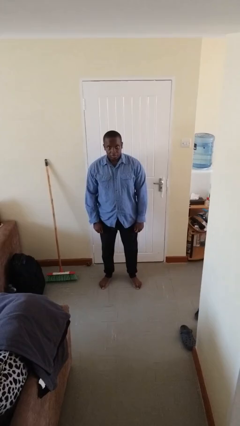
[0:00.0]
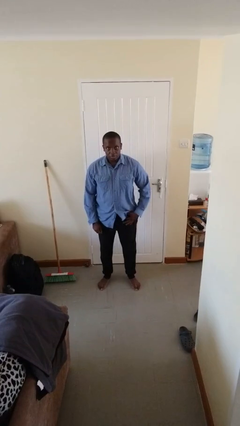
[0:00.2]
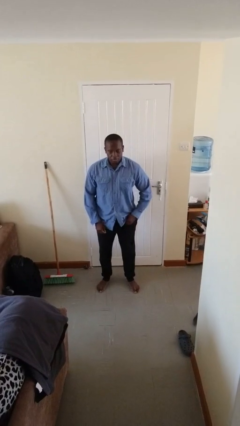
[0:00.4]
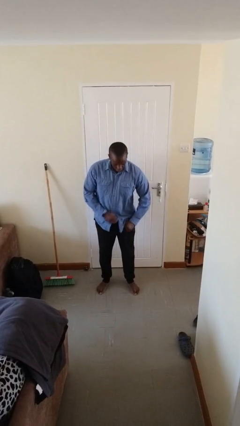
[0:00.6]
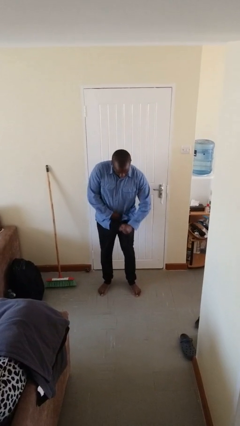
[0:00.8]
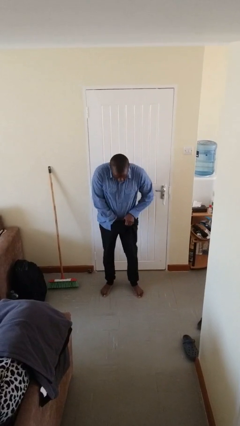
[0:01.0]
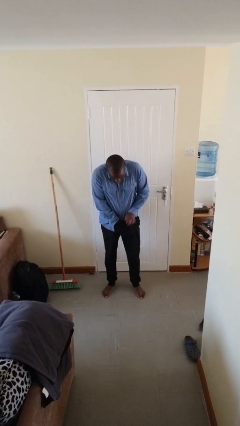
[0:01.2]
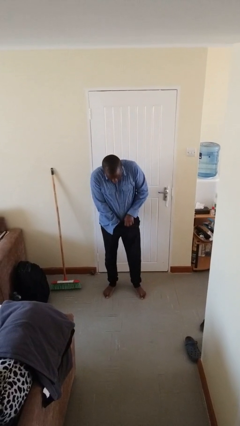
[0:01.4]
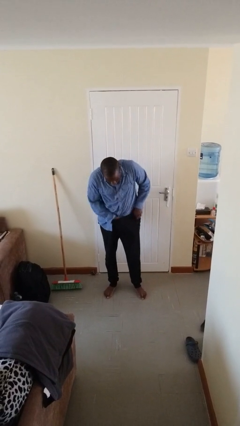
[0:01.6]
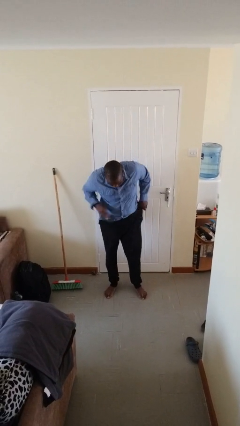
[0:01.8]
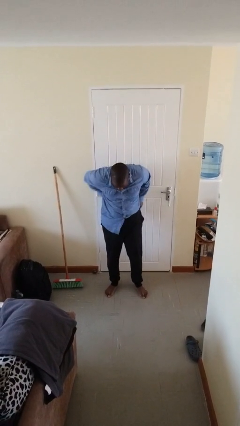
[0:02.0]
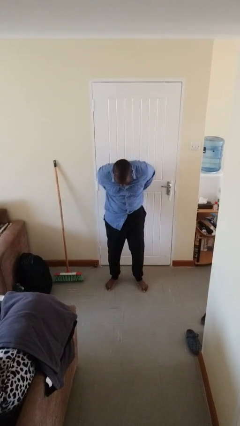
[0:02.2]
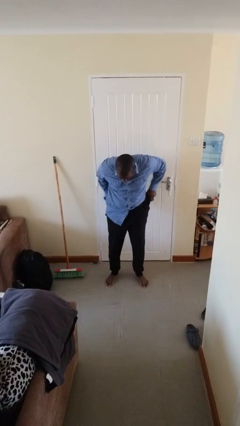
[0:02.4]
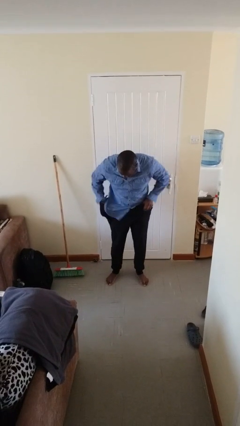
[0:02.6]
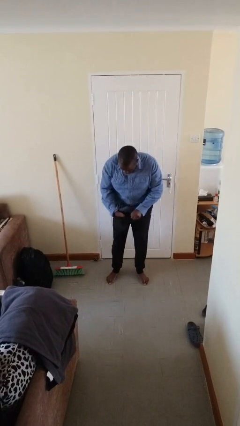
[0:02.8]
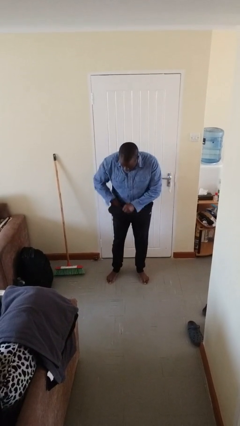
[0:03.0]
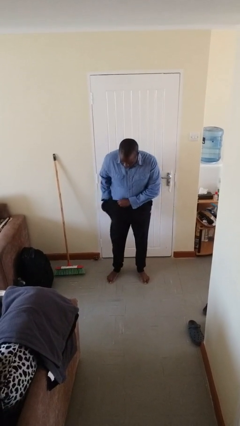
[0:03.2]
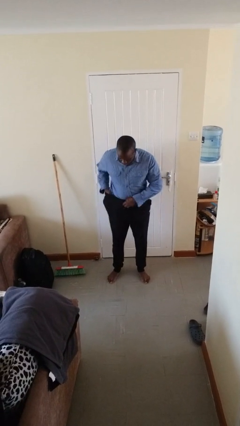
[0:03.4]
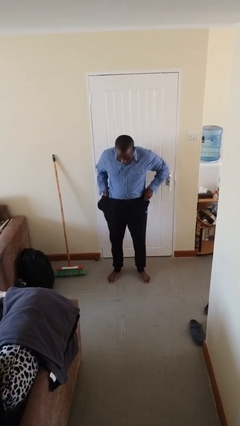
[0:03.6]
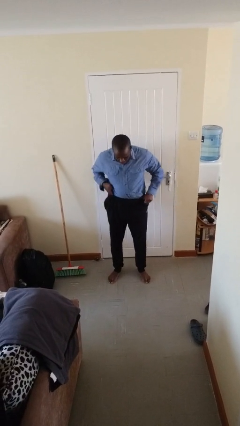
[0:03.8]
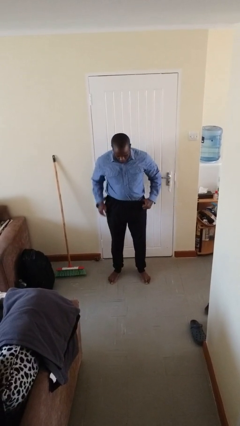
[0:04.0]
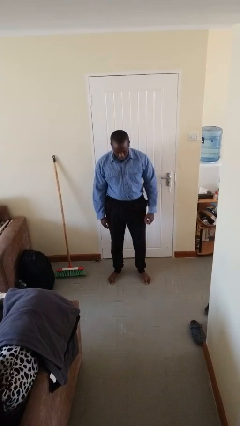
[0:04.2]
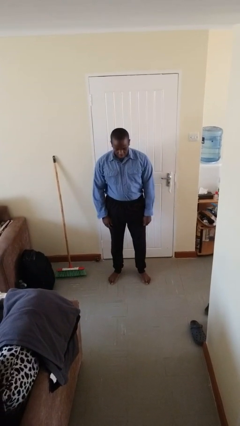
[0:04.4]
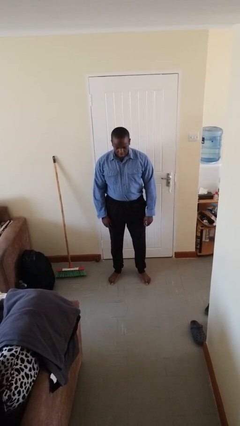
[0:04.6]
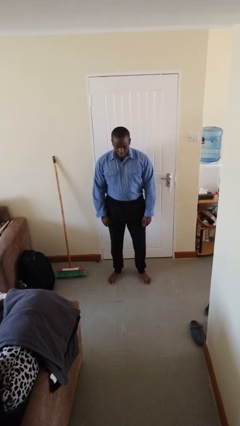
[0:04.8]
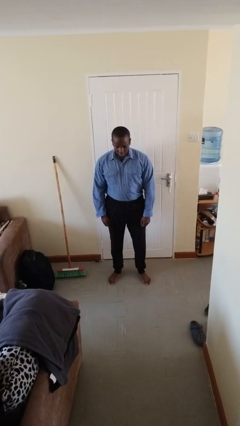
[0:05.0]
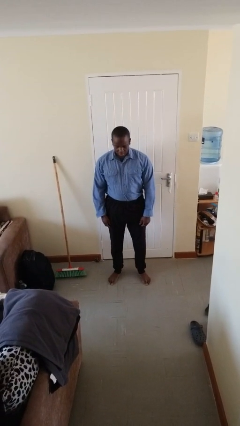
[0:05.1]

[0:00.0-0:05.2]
person tucks in shirt

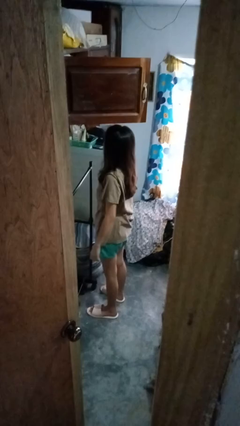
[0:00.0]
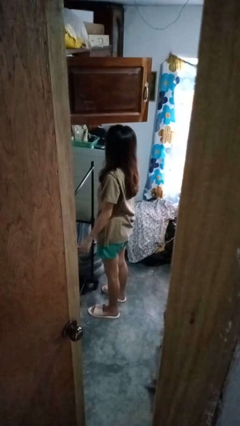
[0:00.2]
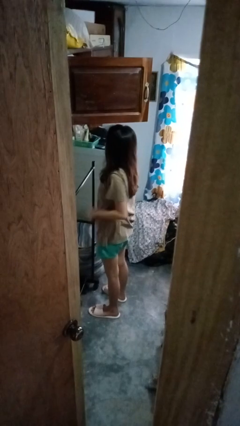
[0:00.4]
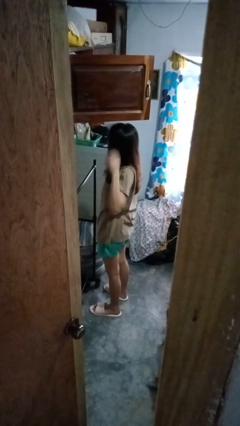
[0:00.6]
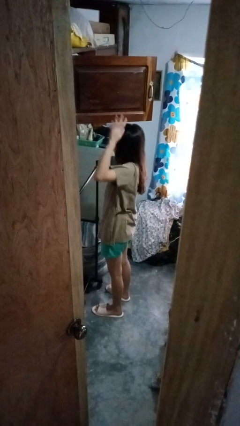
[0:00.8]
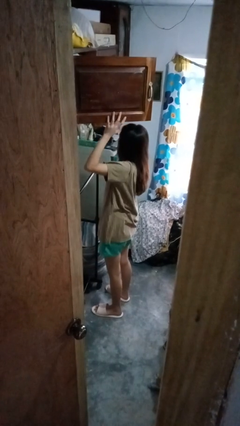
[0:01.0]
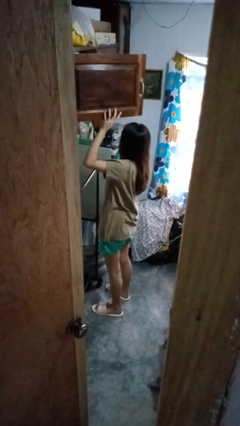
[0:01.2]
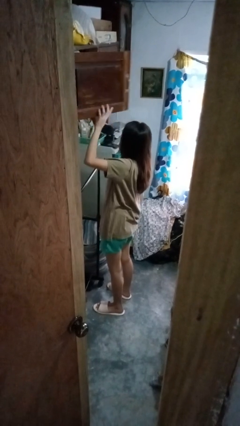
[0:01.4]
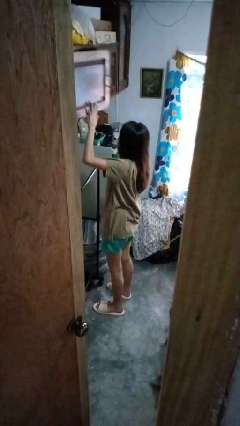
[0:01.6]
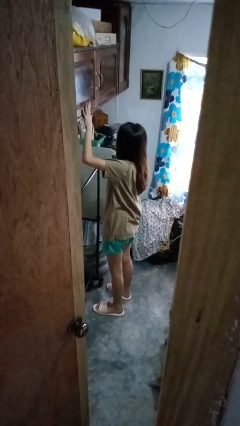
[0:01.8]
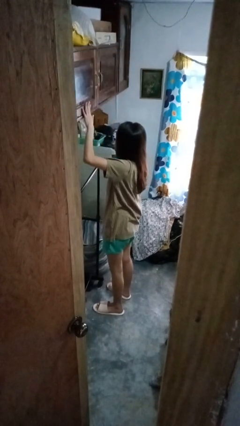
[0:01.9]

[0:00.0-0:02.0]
person closes closet door

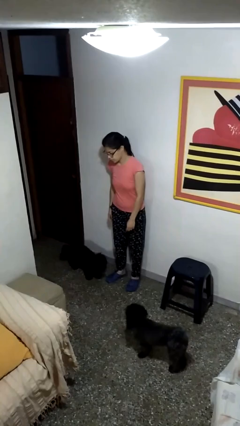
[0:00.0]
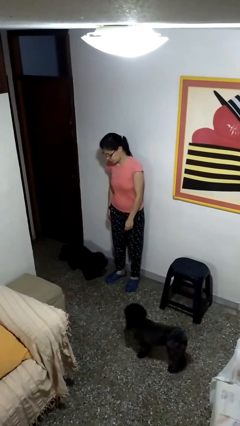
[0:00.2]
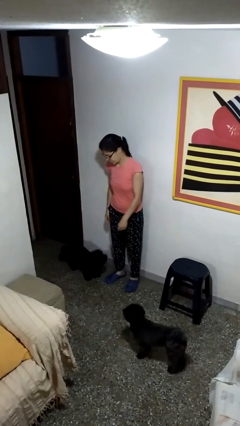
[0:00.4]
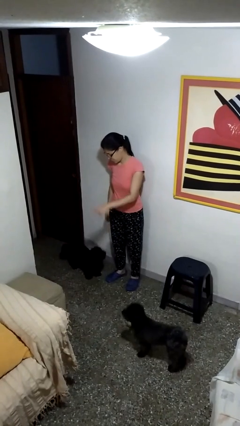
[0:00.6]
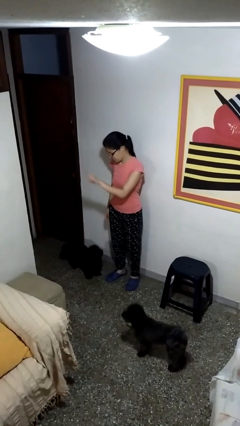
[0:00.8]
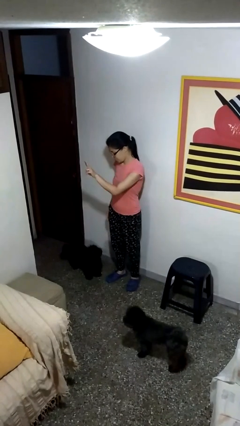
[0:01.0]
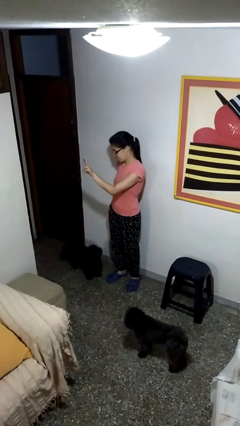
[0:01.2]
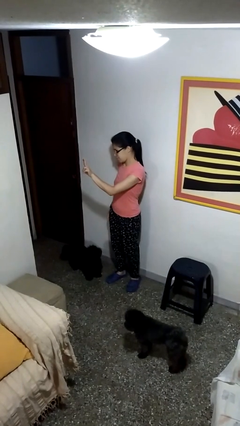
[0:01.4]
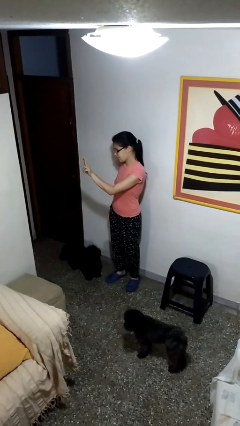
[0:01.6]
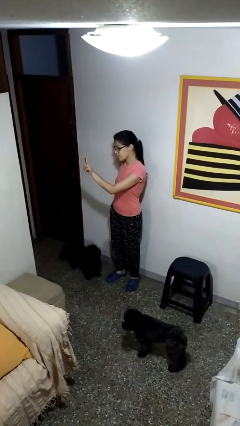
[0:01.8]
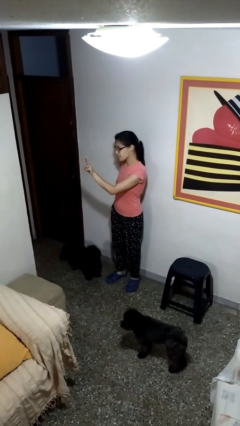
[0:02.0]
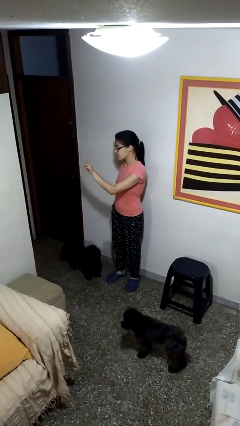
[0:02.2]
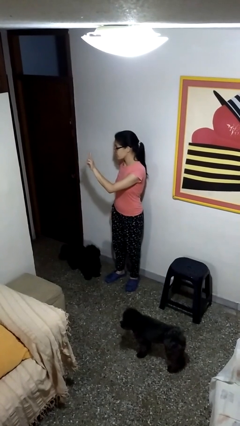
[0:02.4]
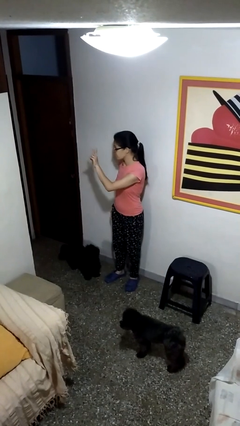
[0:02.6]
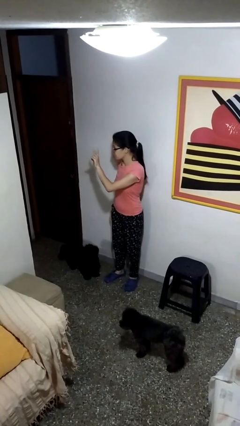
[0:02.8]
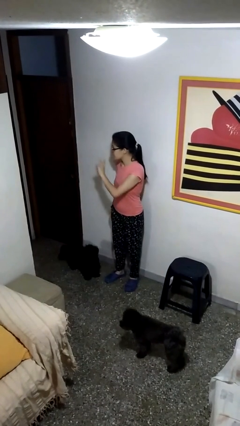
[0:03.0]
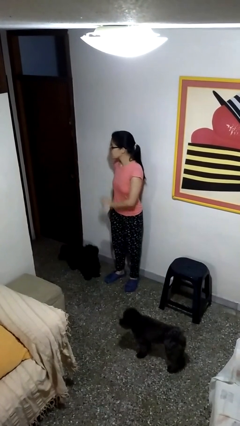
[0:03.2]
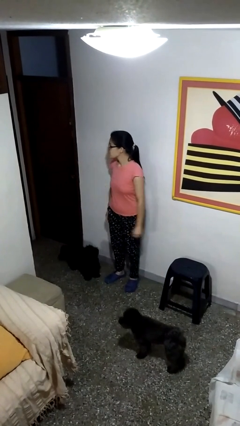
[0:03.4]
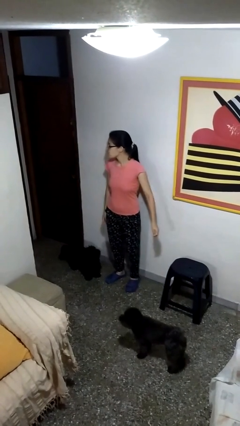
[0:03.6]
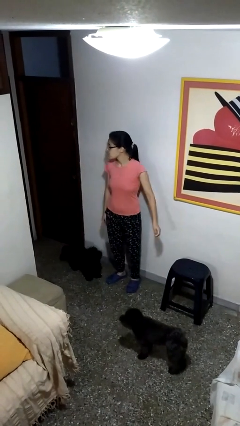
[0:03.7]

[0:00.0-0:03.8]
person gestures peace

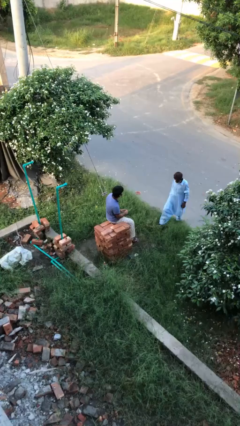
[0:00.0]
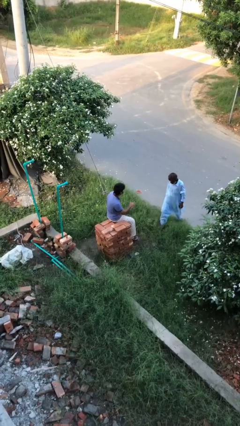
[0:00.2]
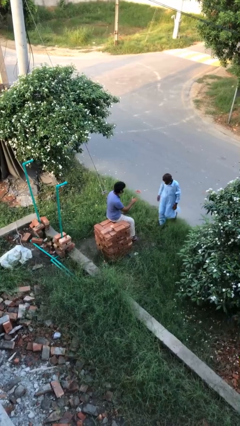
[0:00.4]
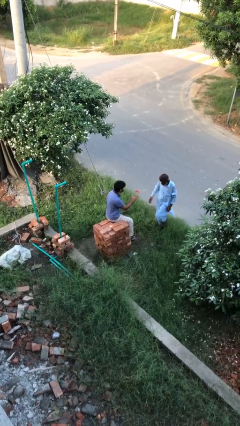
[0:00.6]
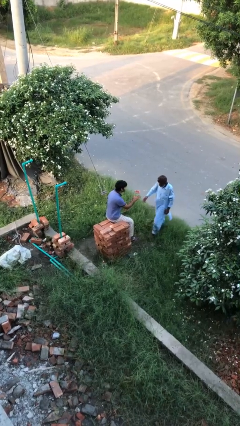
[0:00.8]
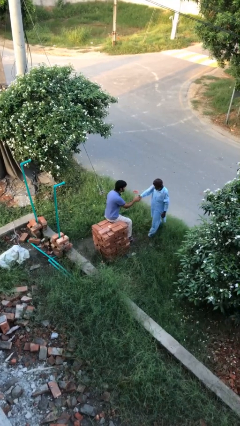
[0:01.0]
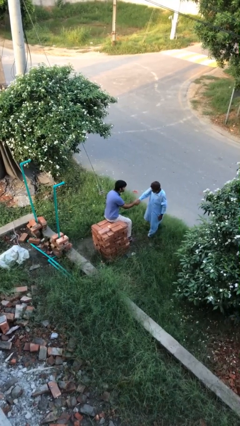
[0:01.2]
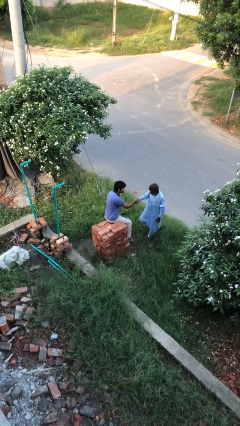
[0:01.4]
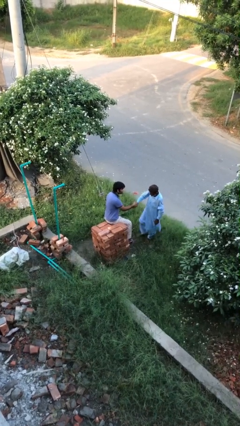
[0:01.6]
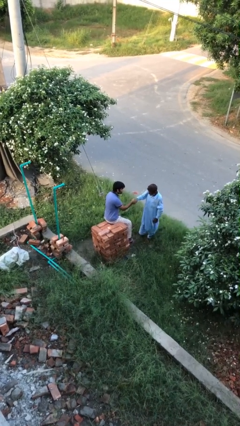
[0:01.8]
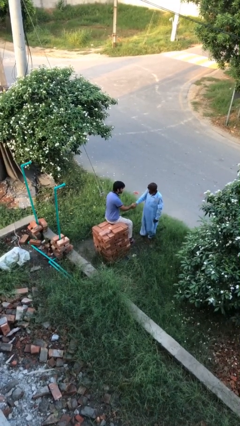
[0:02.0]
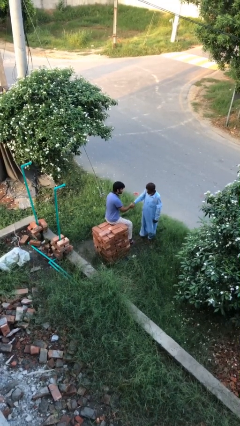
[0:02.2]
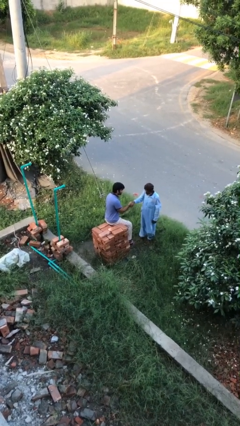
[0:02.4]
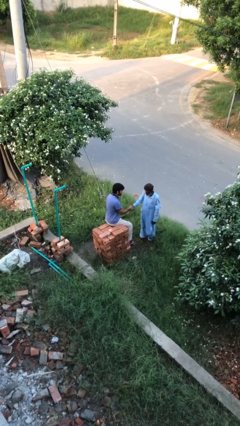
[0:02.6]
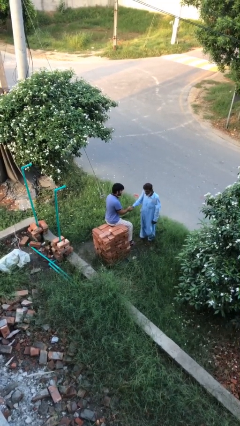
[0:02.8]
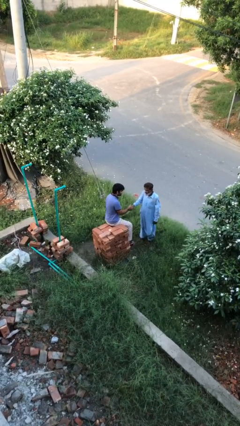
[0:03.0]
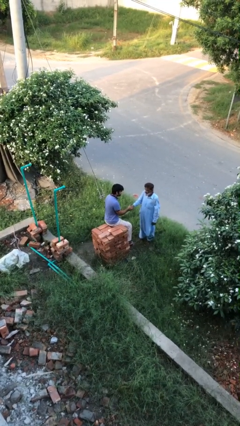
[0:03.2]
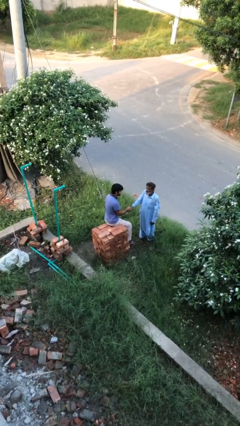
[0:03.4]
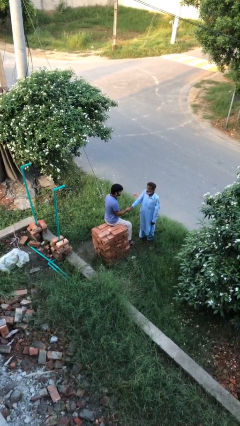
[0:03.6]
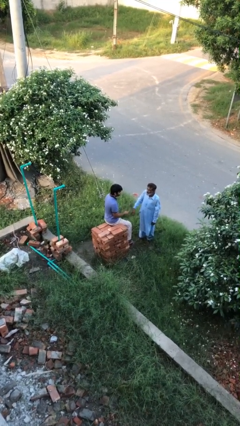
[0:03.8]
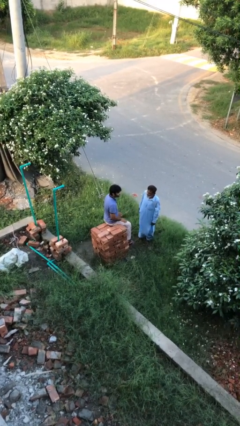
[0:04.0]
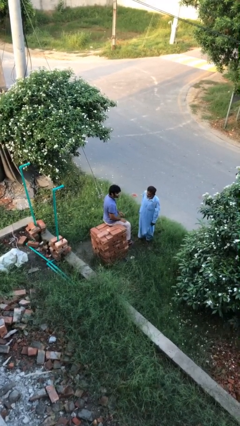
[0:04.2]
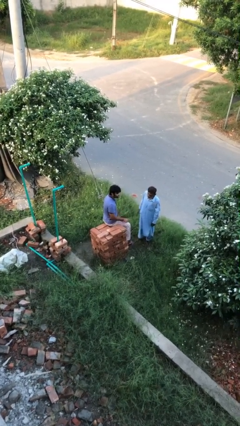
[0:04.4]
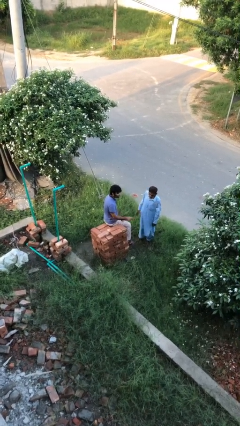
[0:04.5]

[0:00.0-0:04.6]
person shakes hand

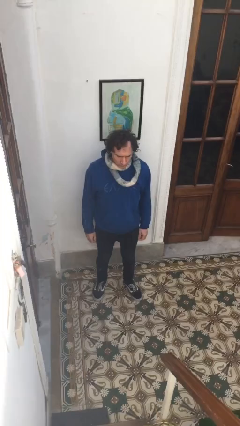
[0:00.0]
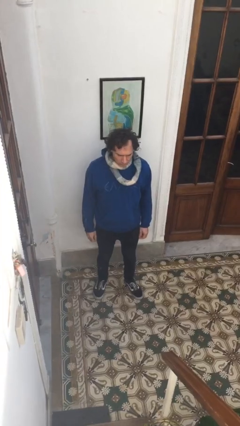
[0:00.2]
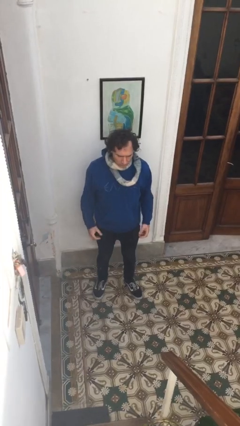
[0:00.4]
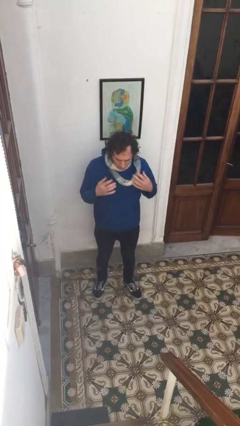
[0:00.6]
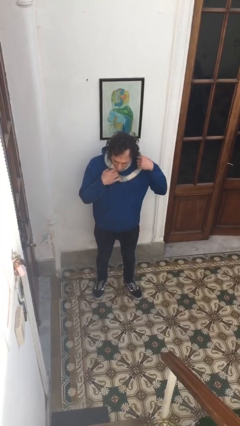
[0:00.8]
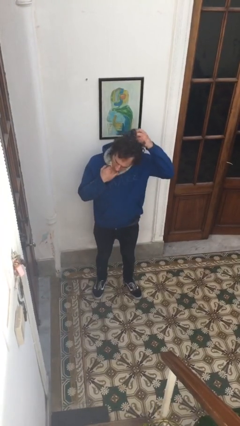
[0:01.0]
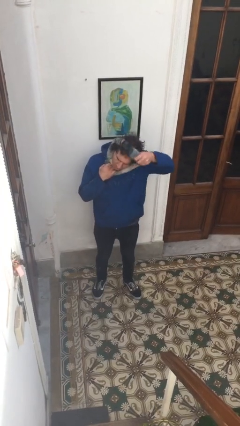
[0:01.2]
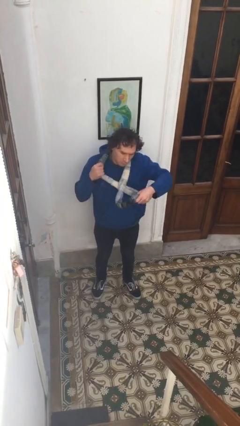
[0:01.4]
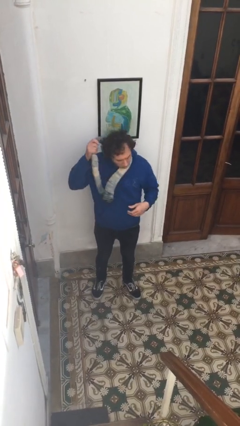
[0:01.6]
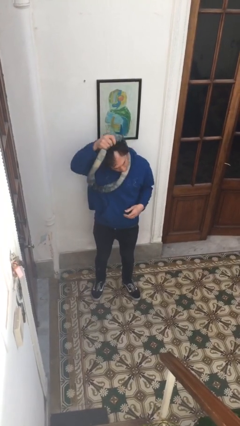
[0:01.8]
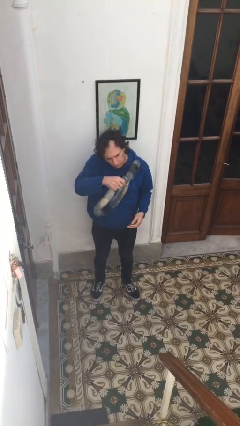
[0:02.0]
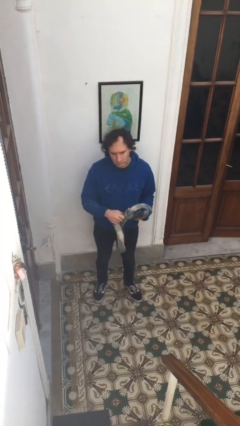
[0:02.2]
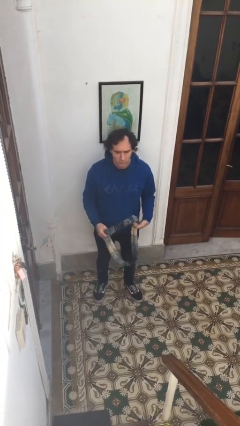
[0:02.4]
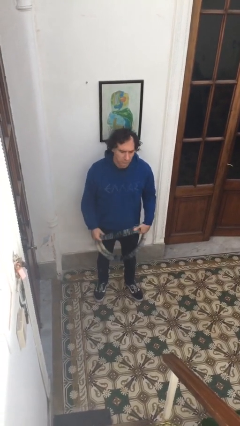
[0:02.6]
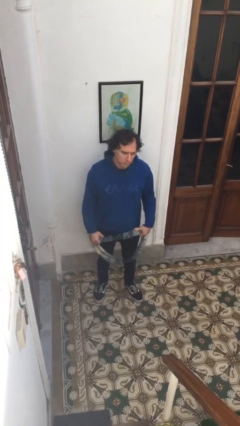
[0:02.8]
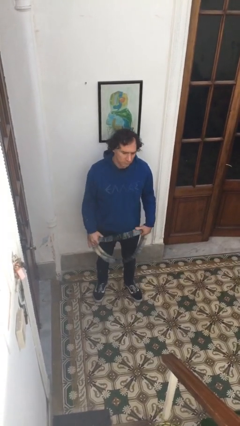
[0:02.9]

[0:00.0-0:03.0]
person takes off scarf
